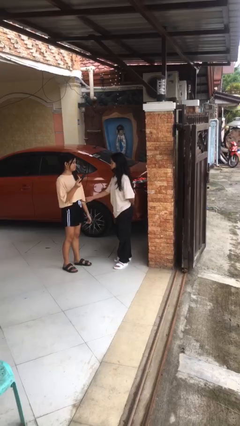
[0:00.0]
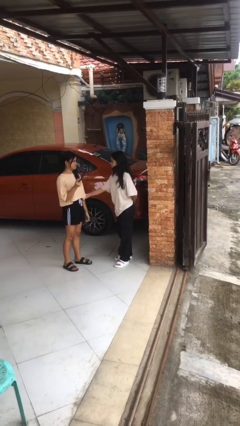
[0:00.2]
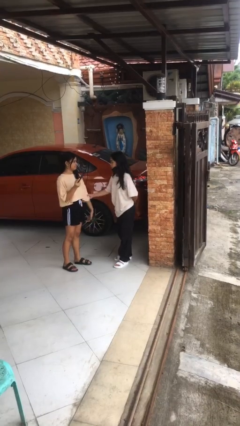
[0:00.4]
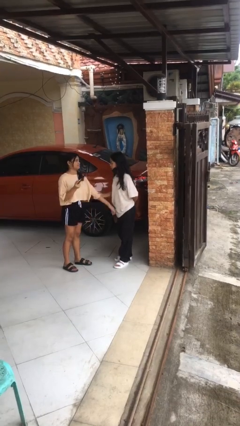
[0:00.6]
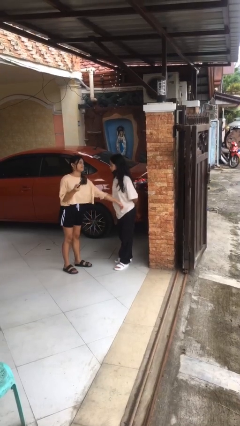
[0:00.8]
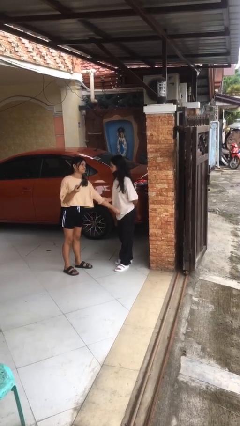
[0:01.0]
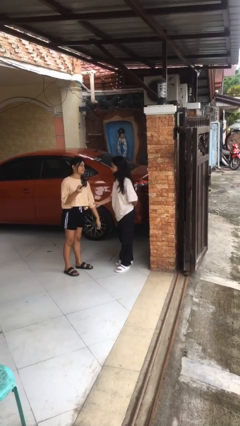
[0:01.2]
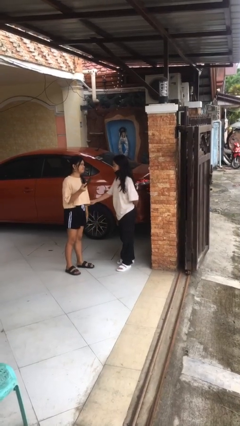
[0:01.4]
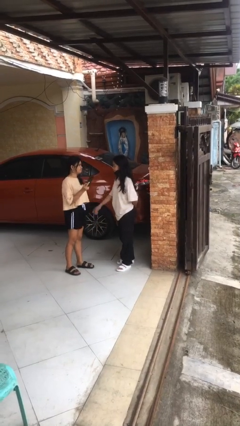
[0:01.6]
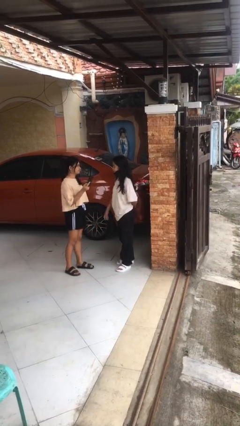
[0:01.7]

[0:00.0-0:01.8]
person grabs person by forearm

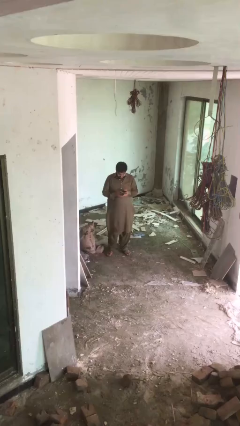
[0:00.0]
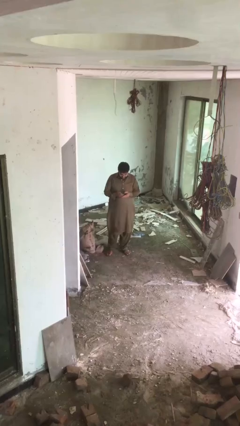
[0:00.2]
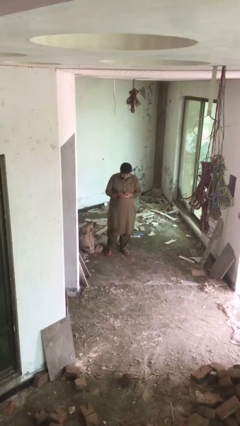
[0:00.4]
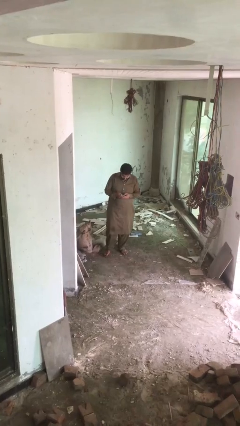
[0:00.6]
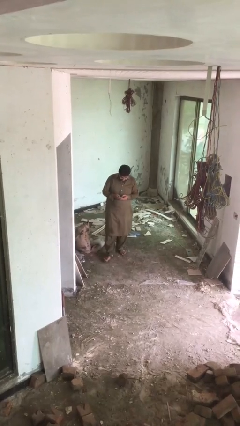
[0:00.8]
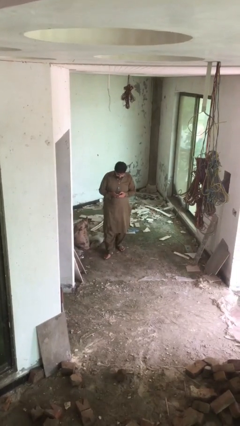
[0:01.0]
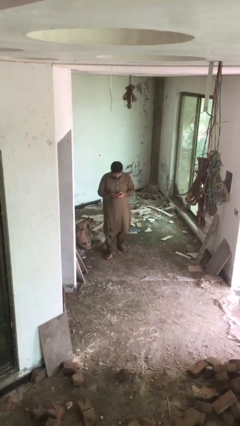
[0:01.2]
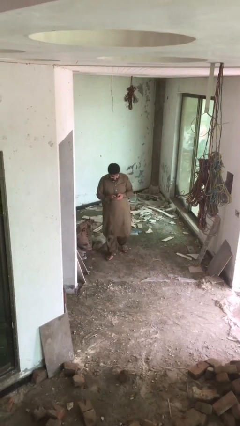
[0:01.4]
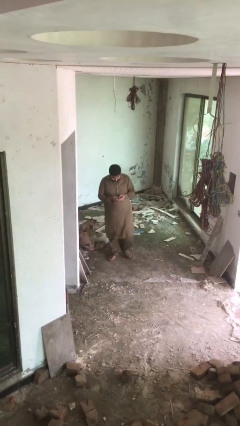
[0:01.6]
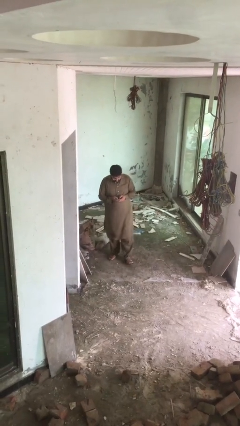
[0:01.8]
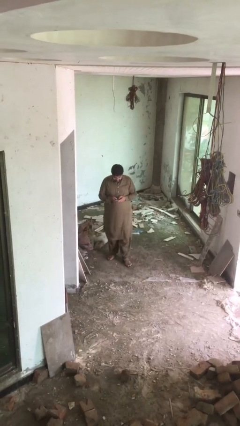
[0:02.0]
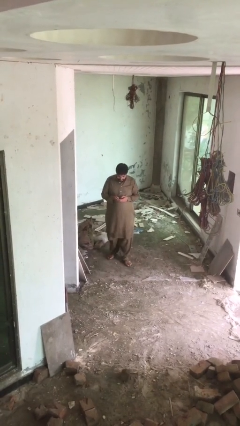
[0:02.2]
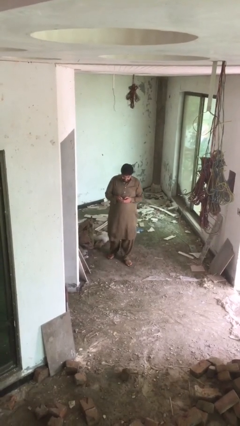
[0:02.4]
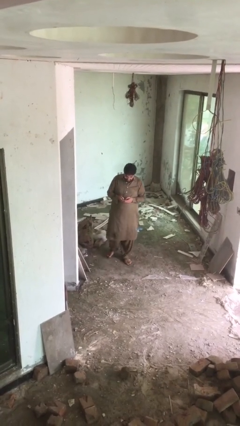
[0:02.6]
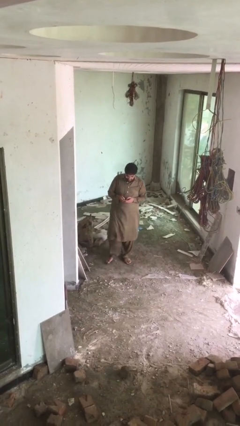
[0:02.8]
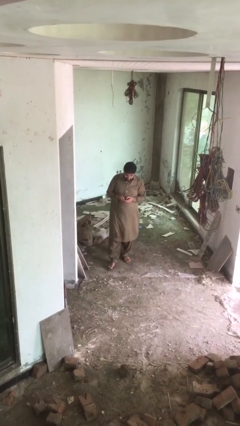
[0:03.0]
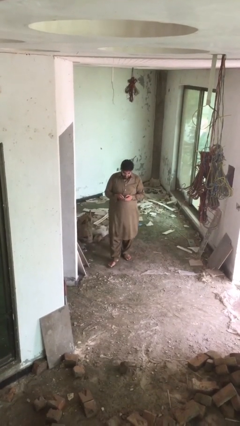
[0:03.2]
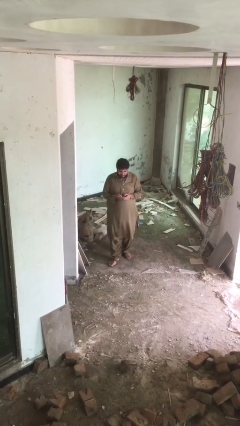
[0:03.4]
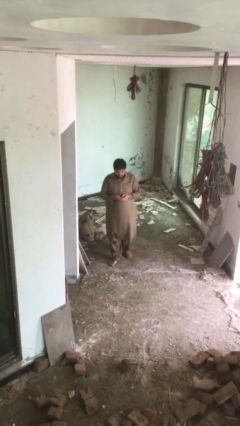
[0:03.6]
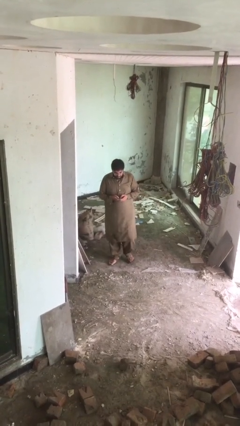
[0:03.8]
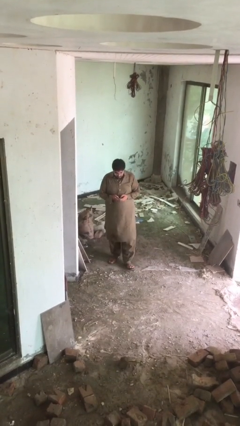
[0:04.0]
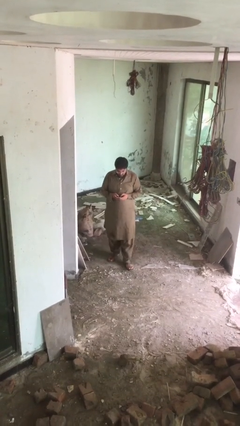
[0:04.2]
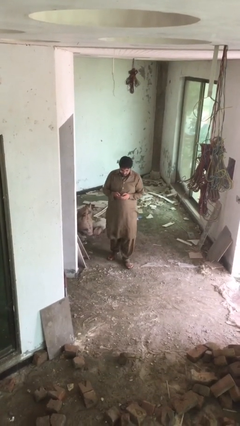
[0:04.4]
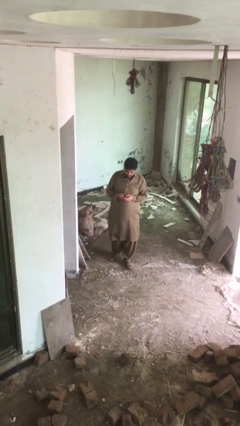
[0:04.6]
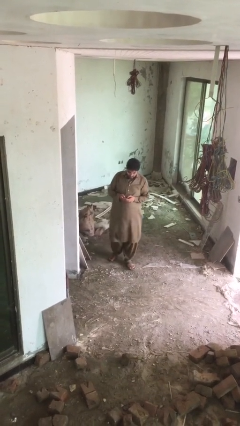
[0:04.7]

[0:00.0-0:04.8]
person texts on phone

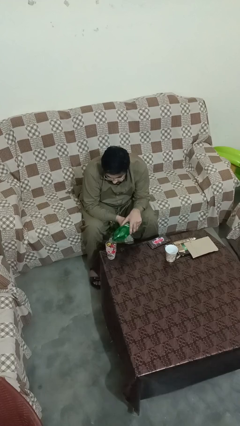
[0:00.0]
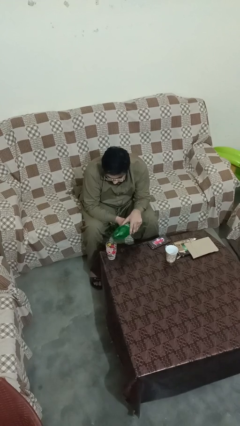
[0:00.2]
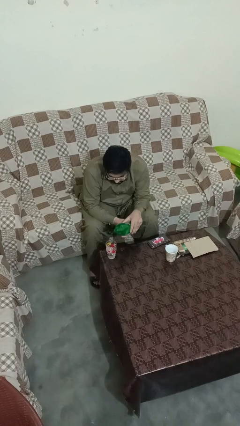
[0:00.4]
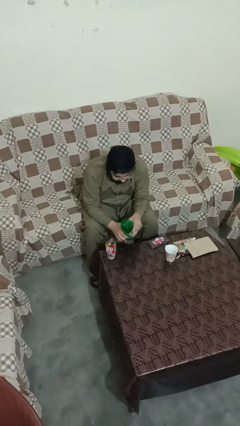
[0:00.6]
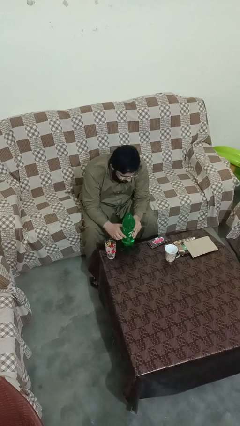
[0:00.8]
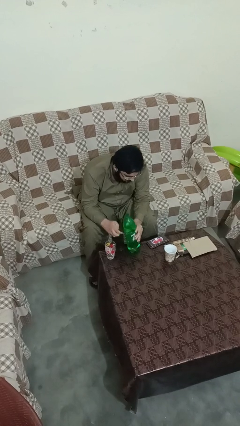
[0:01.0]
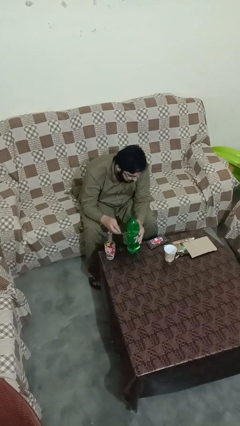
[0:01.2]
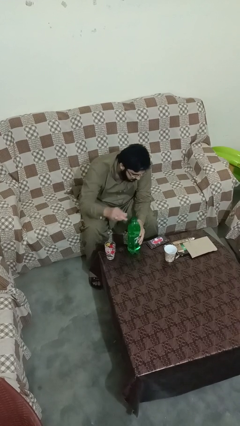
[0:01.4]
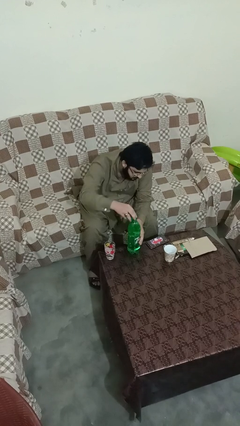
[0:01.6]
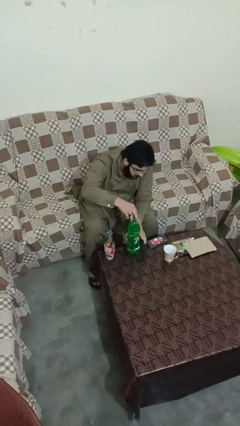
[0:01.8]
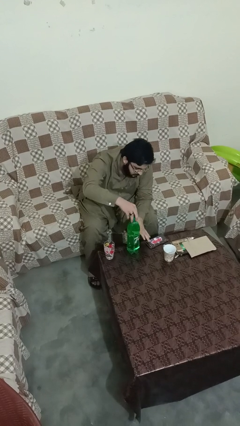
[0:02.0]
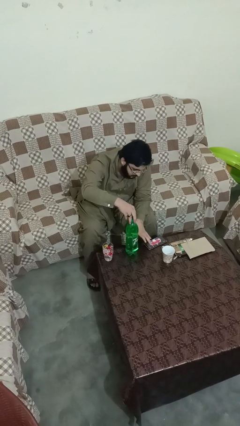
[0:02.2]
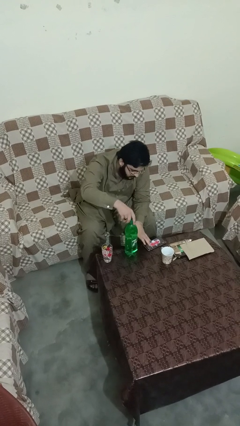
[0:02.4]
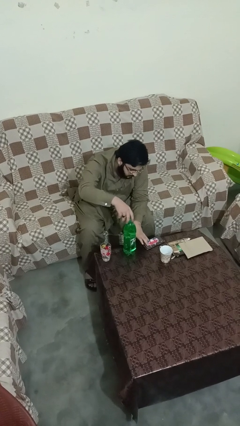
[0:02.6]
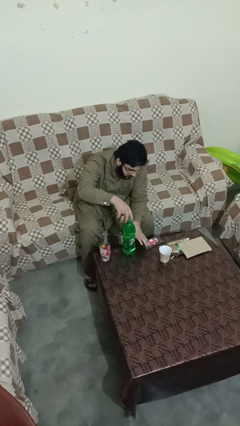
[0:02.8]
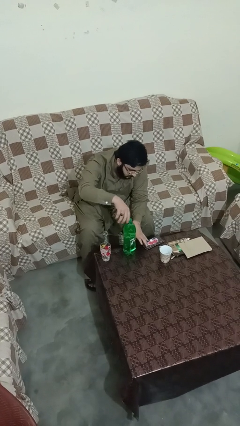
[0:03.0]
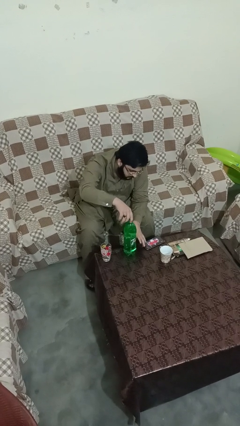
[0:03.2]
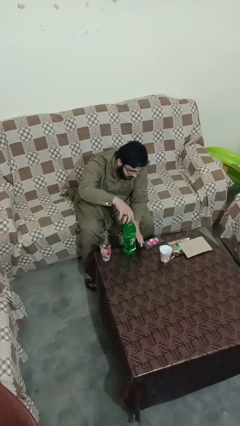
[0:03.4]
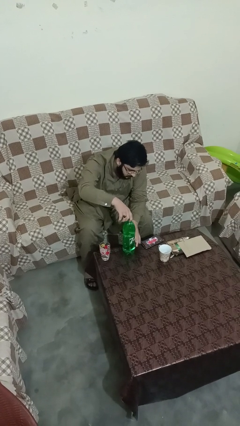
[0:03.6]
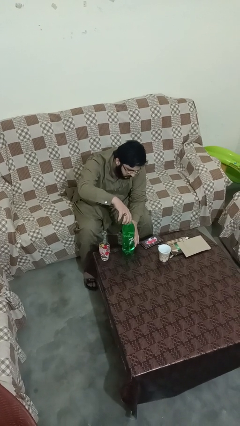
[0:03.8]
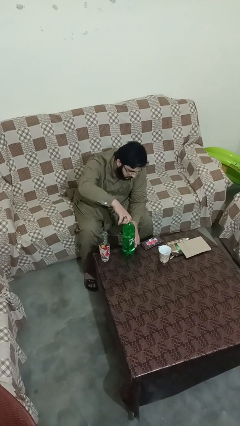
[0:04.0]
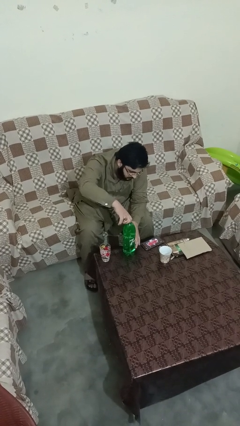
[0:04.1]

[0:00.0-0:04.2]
person screws lid to bottle

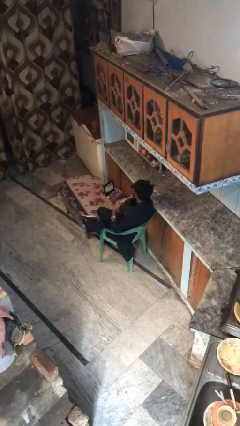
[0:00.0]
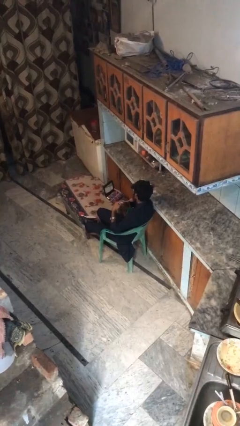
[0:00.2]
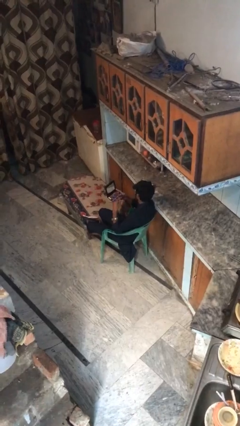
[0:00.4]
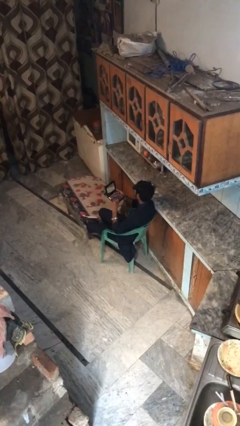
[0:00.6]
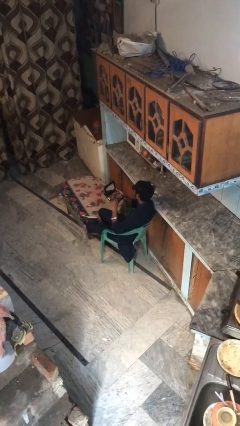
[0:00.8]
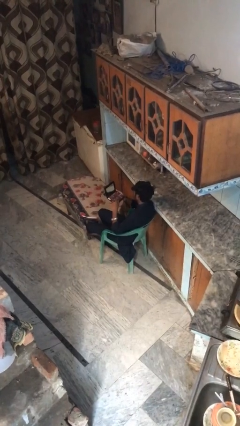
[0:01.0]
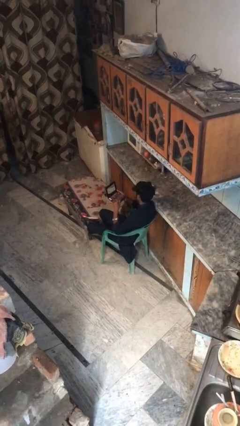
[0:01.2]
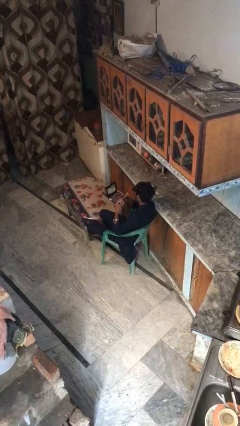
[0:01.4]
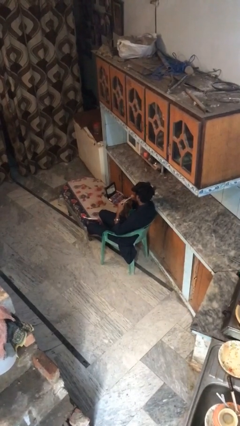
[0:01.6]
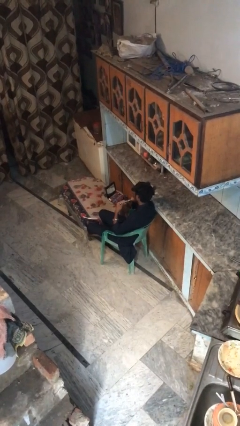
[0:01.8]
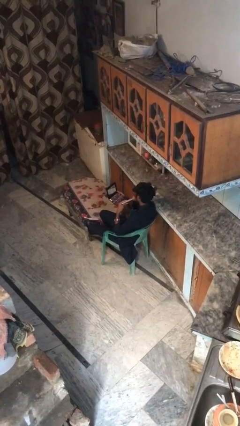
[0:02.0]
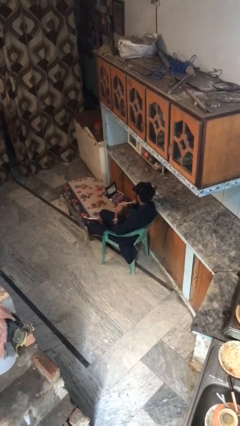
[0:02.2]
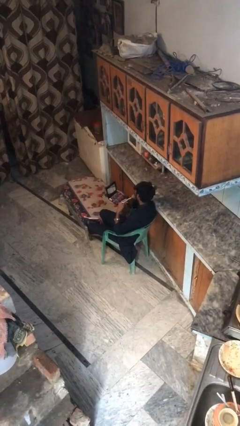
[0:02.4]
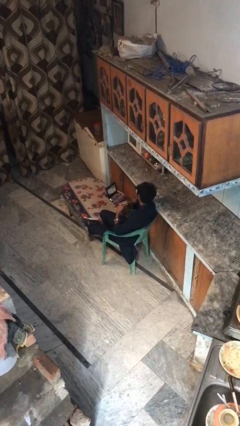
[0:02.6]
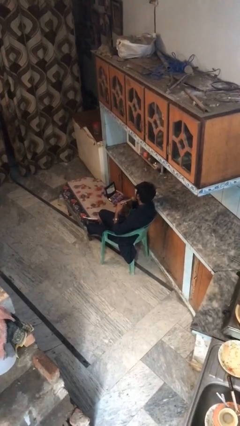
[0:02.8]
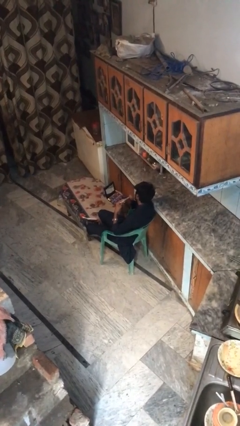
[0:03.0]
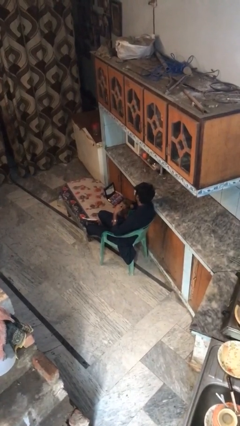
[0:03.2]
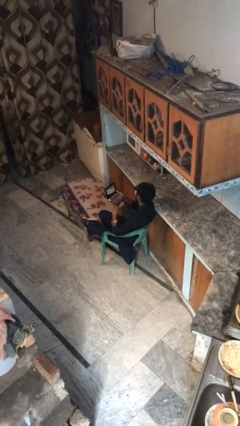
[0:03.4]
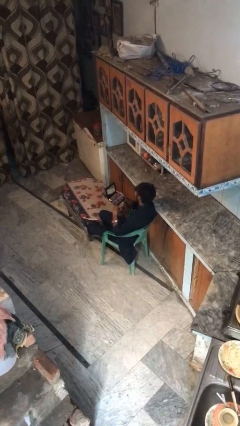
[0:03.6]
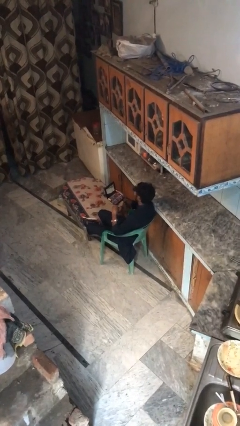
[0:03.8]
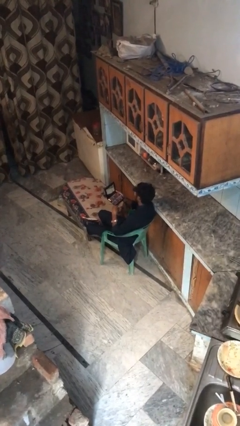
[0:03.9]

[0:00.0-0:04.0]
person applies foundation makeup

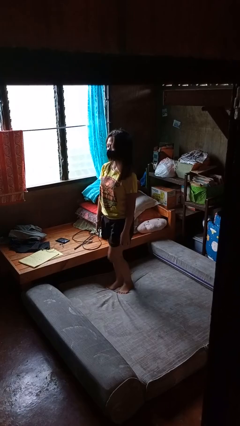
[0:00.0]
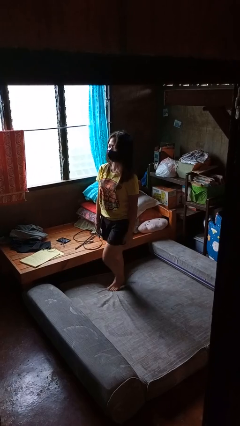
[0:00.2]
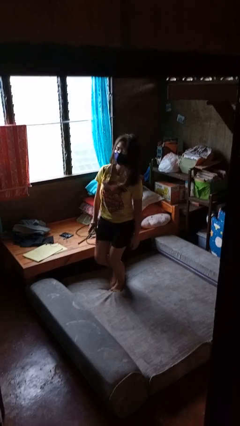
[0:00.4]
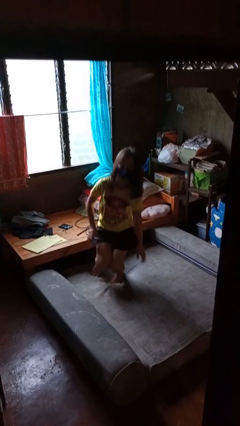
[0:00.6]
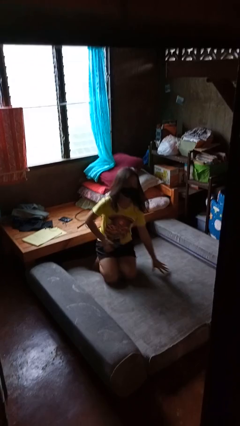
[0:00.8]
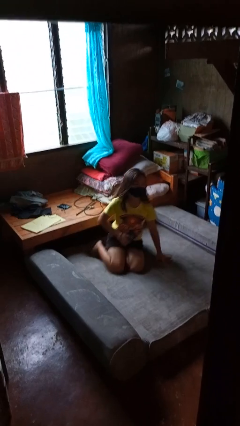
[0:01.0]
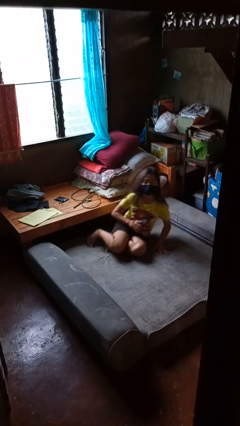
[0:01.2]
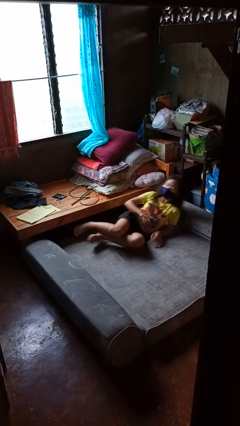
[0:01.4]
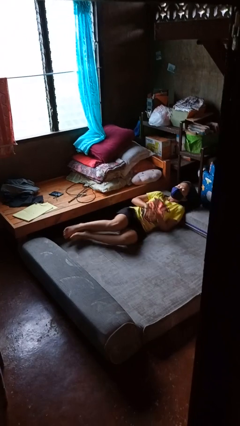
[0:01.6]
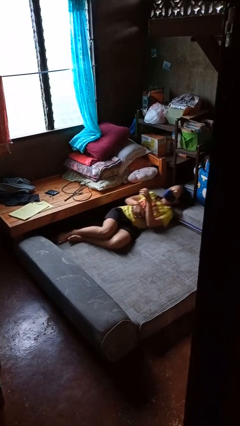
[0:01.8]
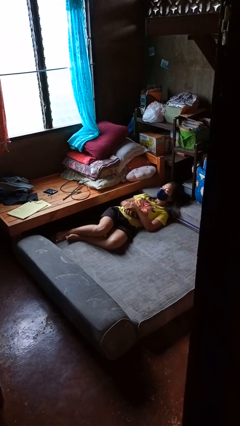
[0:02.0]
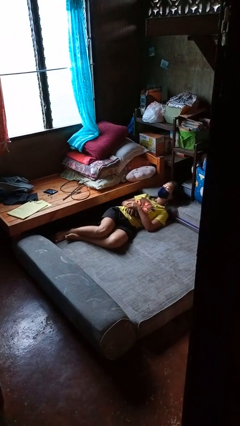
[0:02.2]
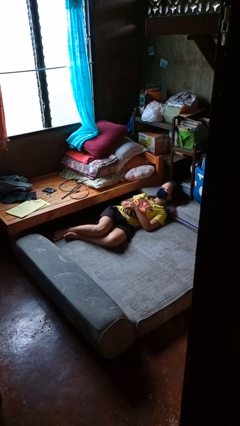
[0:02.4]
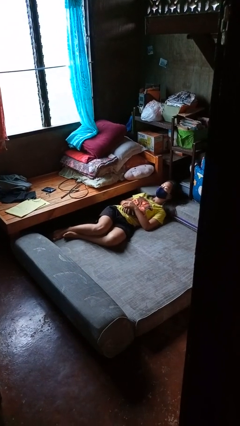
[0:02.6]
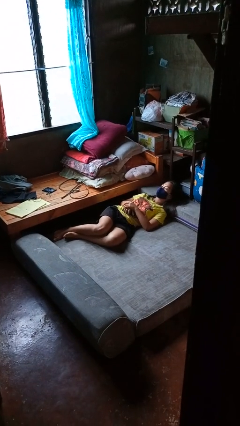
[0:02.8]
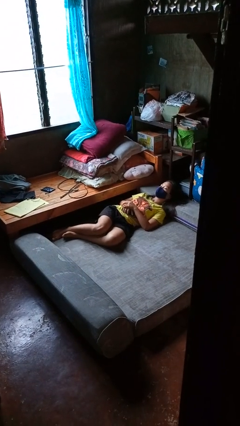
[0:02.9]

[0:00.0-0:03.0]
person lies down on bed
